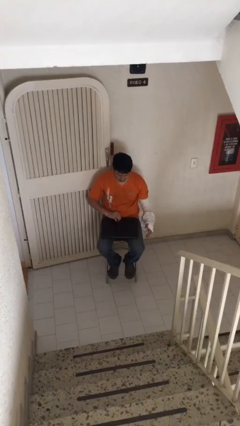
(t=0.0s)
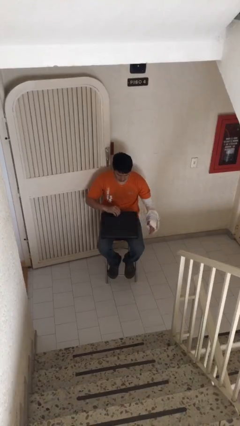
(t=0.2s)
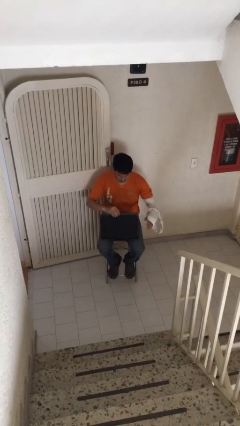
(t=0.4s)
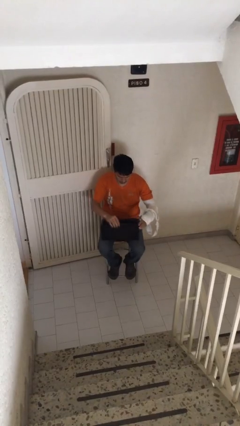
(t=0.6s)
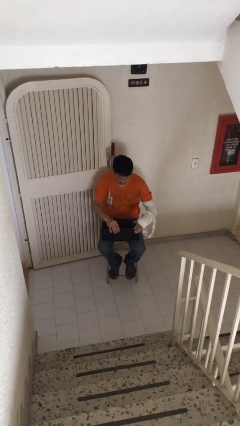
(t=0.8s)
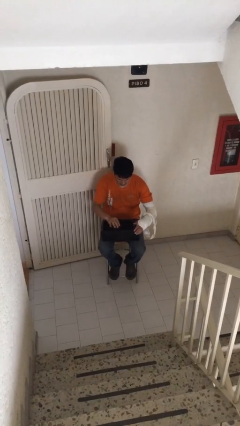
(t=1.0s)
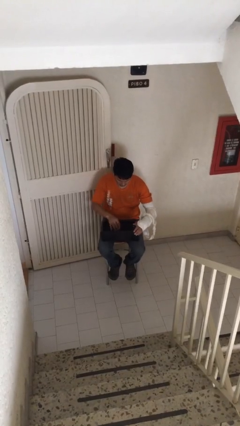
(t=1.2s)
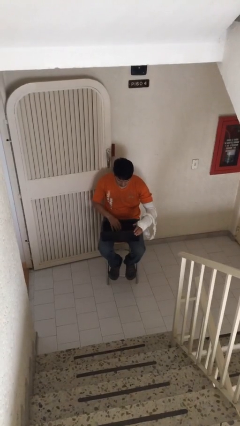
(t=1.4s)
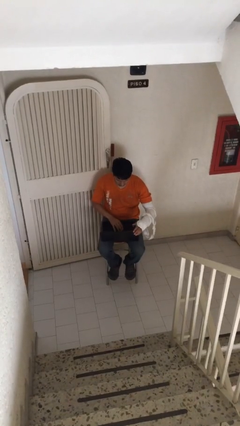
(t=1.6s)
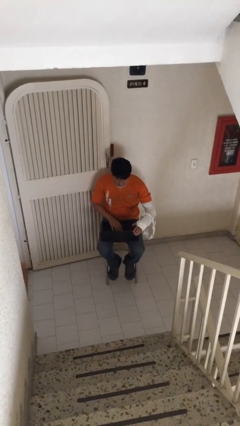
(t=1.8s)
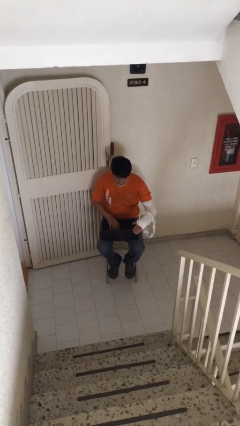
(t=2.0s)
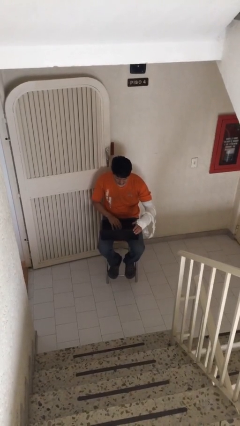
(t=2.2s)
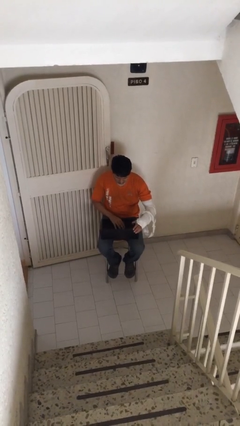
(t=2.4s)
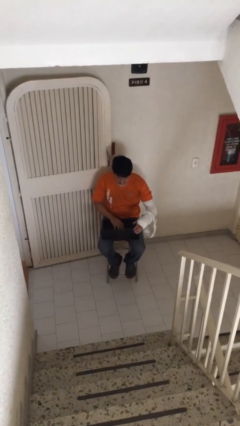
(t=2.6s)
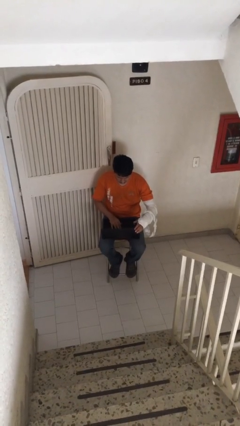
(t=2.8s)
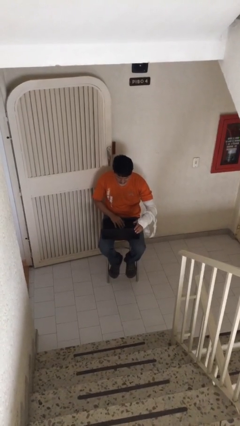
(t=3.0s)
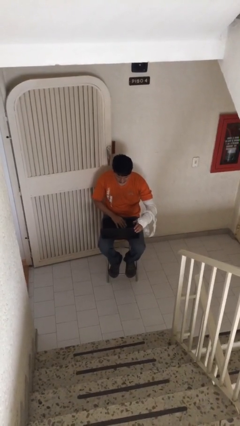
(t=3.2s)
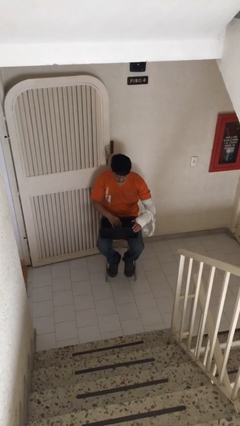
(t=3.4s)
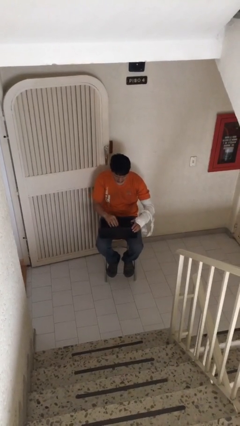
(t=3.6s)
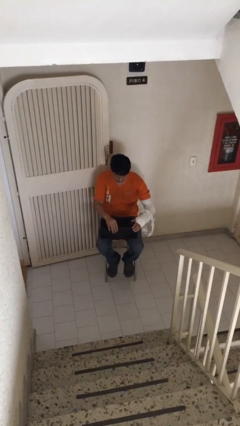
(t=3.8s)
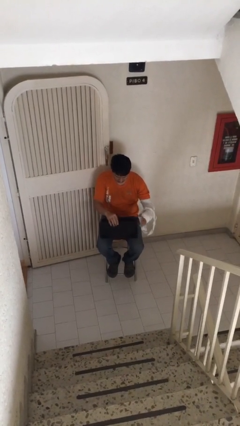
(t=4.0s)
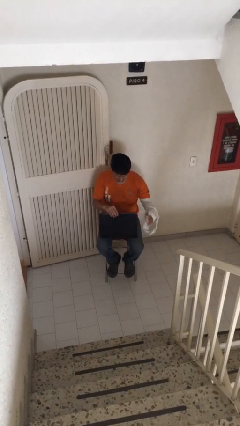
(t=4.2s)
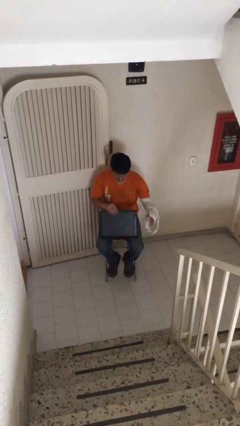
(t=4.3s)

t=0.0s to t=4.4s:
person interacts with laptop

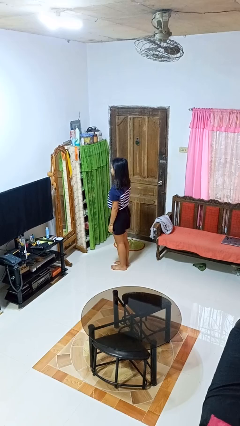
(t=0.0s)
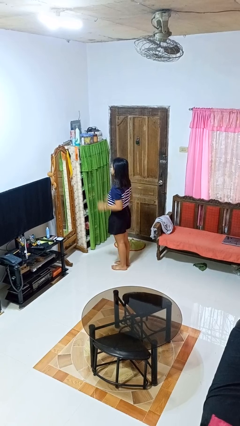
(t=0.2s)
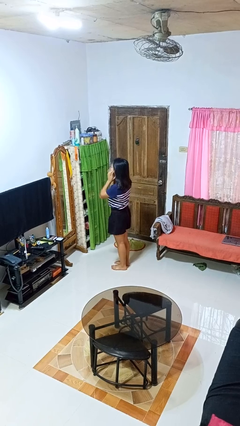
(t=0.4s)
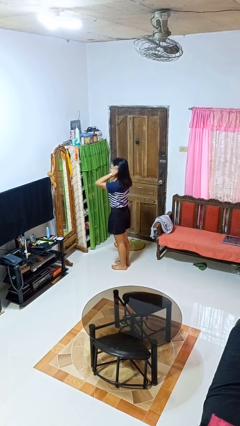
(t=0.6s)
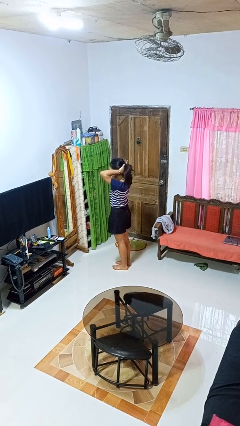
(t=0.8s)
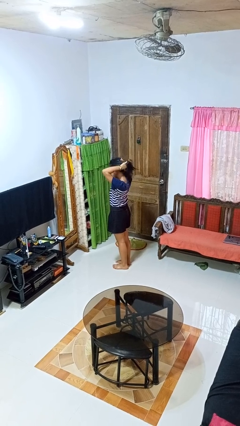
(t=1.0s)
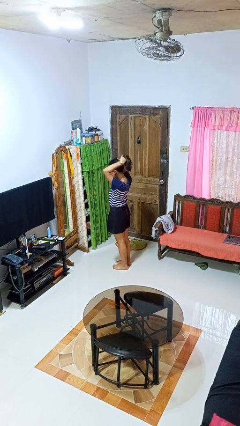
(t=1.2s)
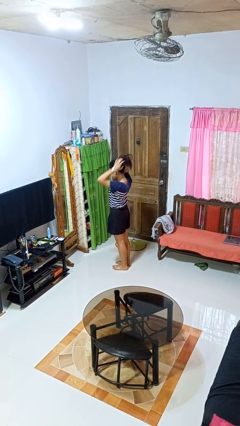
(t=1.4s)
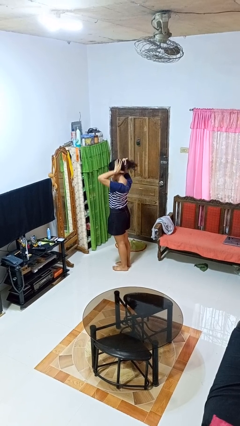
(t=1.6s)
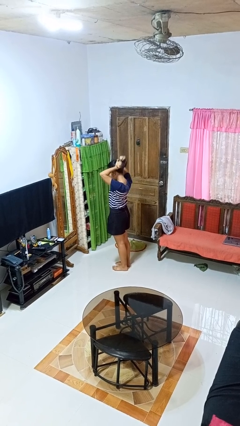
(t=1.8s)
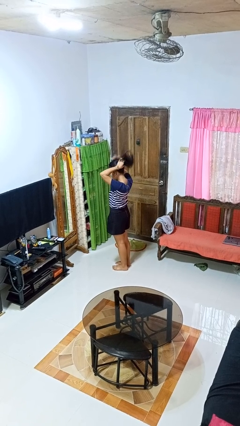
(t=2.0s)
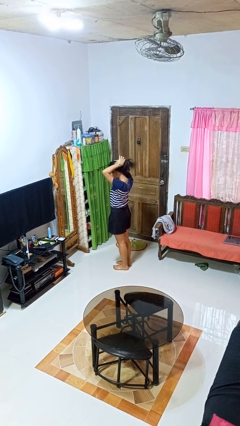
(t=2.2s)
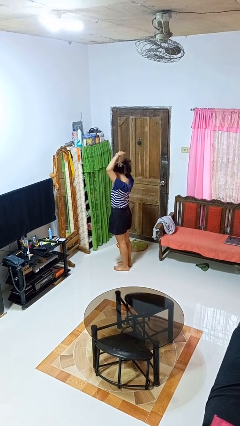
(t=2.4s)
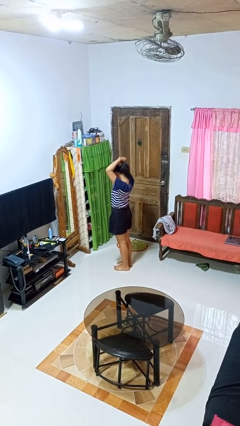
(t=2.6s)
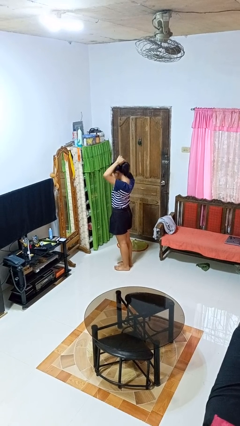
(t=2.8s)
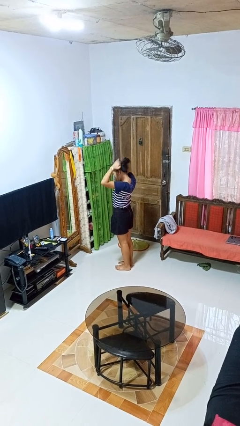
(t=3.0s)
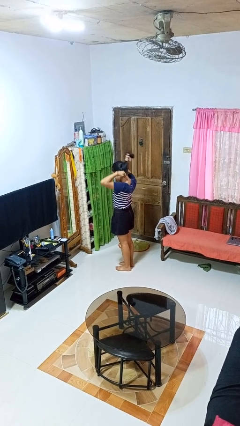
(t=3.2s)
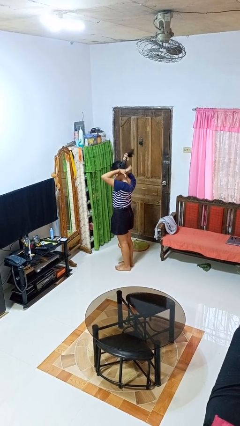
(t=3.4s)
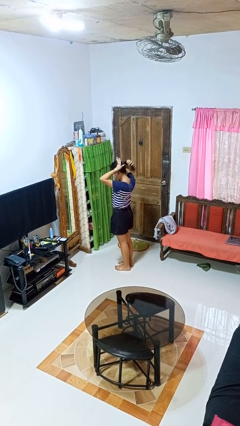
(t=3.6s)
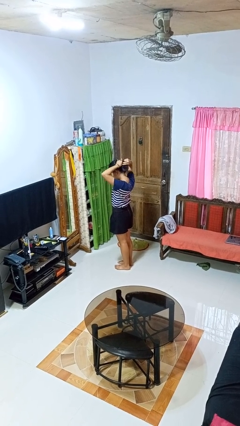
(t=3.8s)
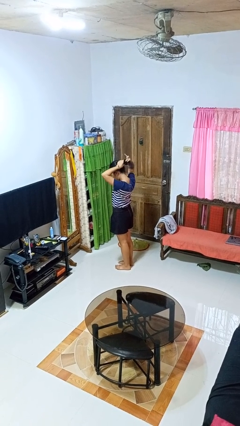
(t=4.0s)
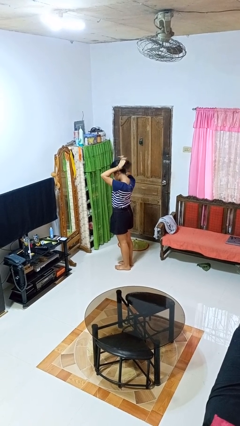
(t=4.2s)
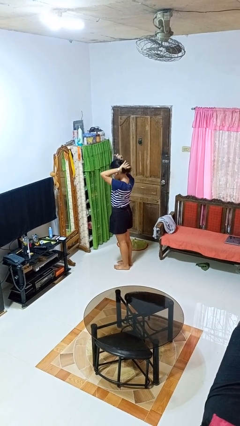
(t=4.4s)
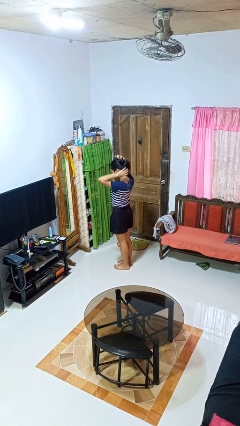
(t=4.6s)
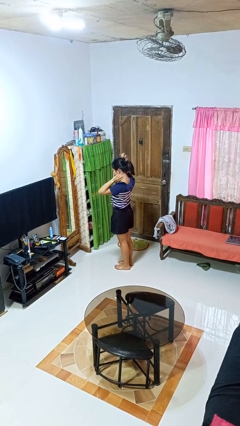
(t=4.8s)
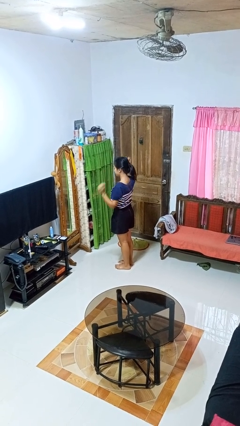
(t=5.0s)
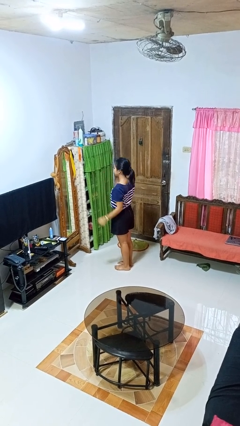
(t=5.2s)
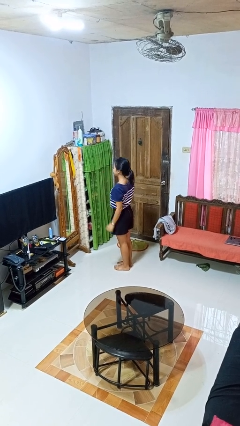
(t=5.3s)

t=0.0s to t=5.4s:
person puts hair in ponytail

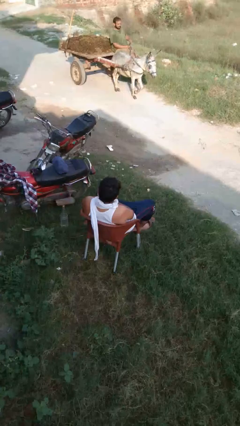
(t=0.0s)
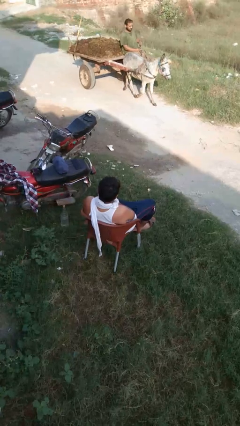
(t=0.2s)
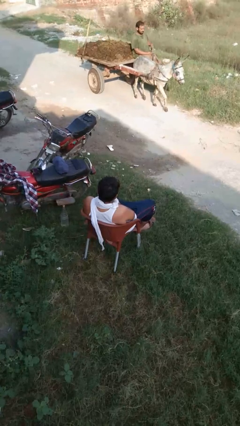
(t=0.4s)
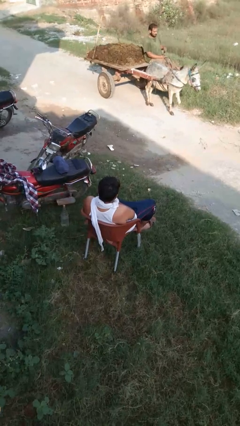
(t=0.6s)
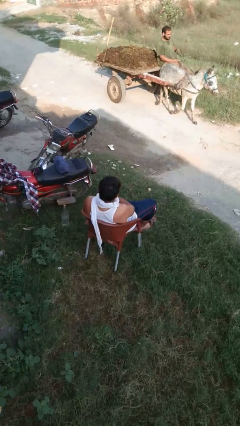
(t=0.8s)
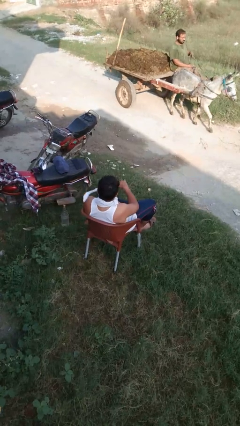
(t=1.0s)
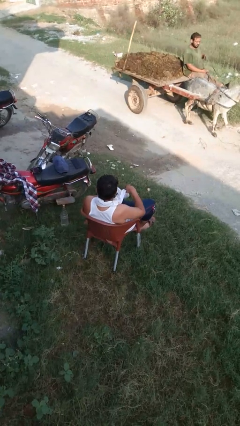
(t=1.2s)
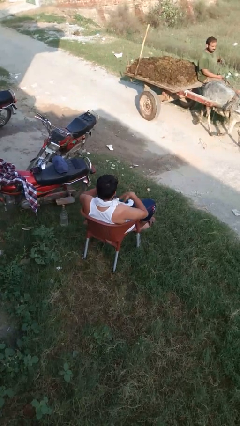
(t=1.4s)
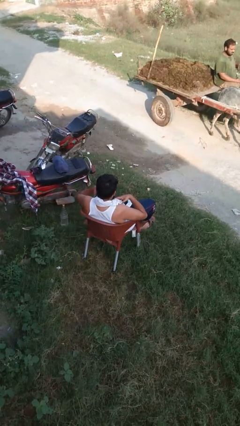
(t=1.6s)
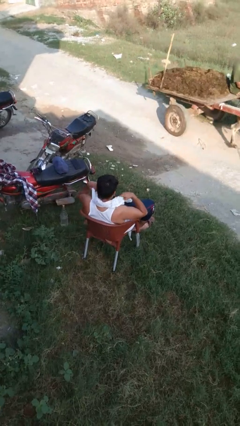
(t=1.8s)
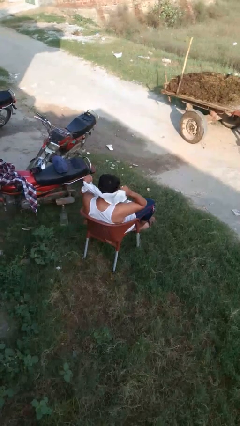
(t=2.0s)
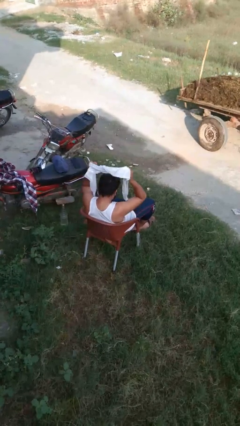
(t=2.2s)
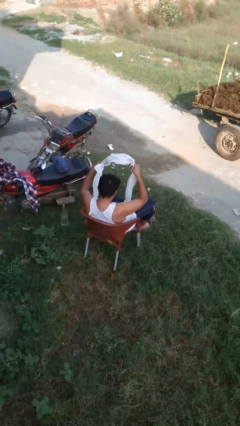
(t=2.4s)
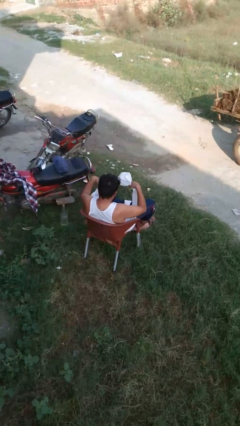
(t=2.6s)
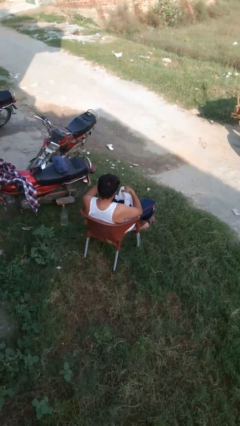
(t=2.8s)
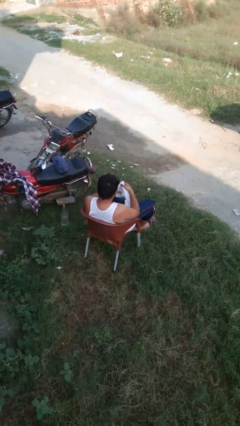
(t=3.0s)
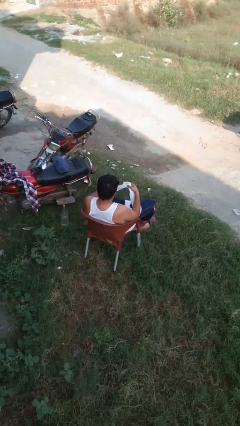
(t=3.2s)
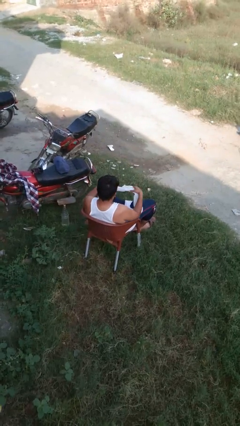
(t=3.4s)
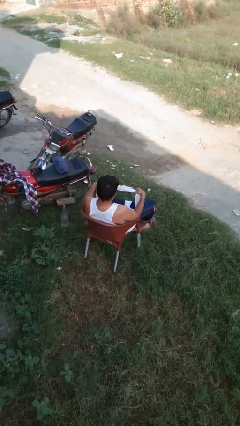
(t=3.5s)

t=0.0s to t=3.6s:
person takes off scarf

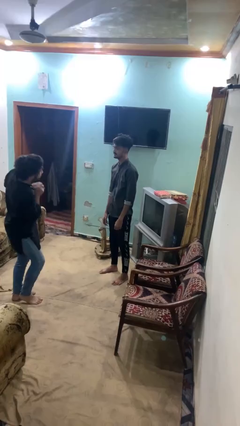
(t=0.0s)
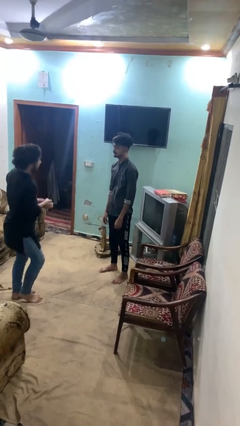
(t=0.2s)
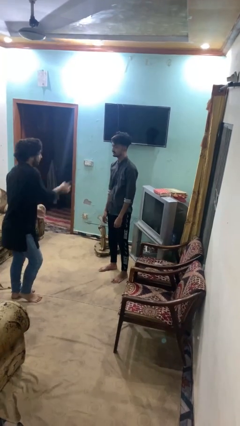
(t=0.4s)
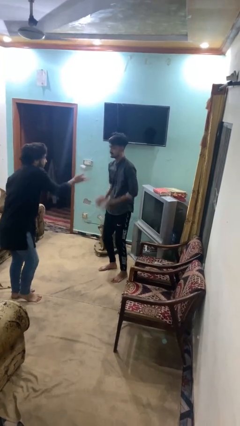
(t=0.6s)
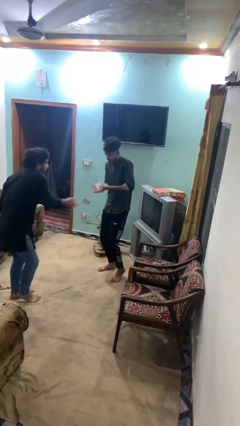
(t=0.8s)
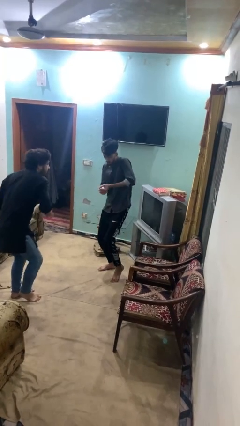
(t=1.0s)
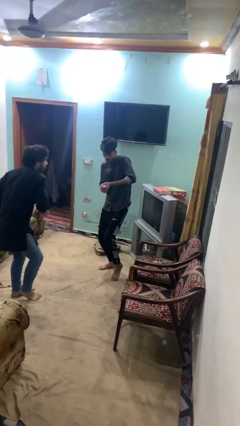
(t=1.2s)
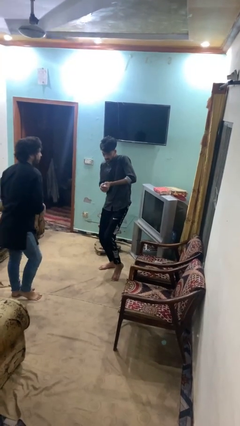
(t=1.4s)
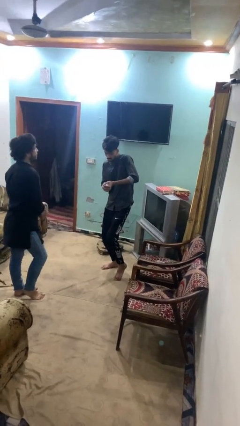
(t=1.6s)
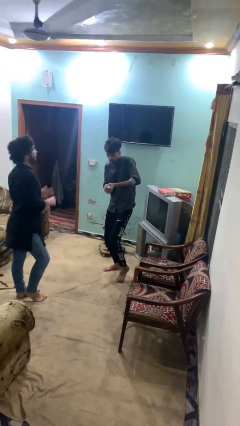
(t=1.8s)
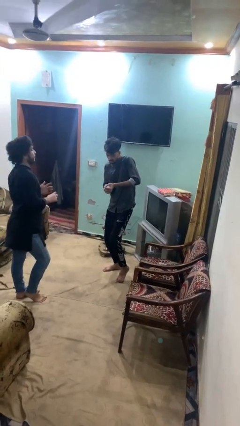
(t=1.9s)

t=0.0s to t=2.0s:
person catches object from person

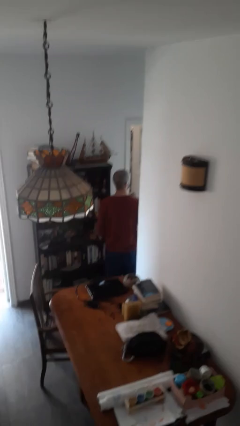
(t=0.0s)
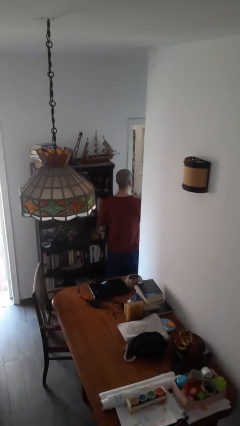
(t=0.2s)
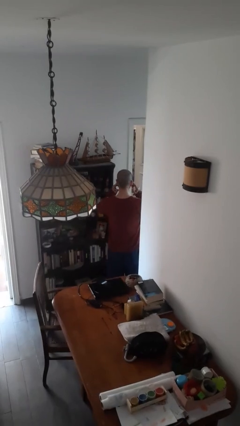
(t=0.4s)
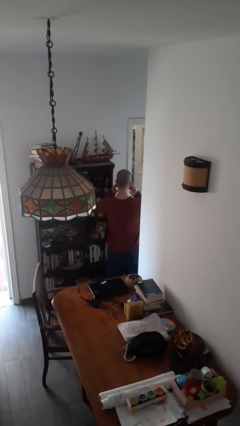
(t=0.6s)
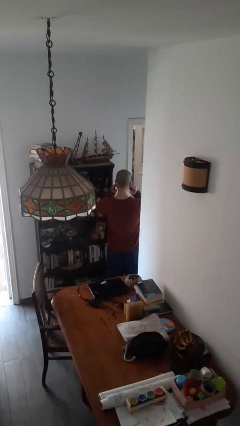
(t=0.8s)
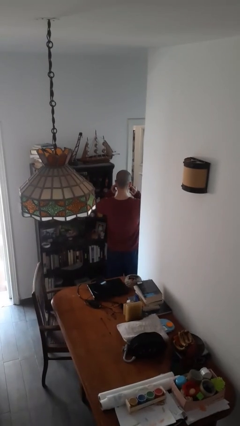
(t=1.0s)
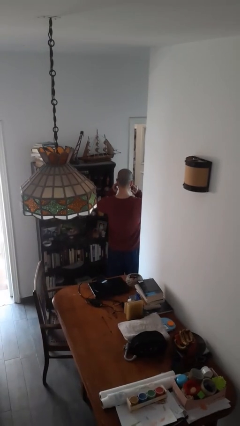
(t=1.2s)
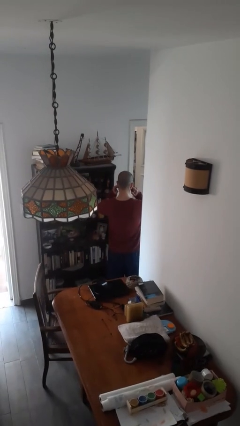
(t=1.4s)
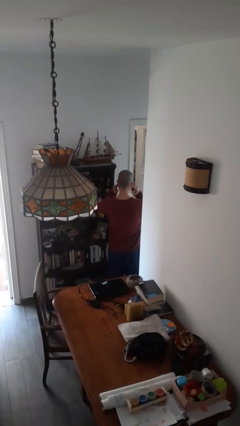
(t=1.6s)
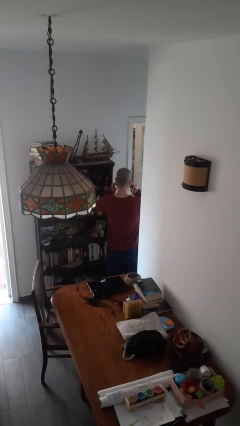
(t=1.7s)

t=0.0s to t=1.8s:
person puts fingers in ear
